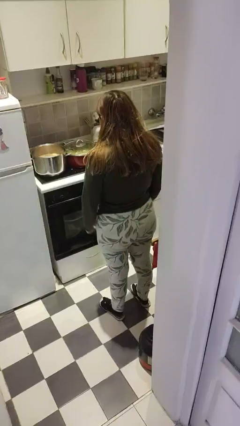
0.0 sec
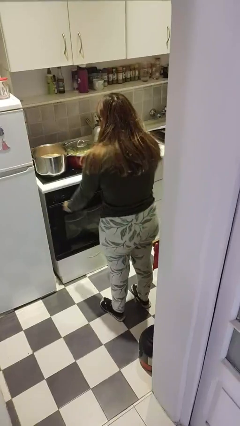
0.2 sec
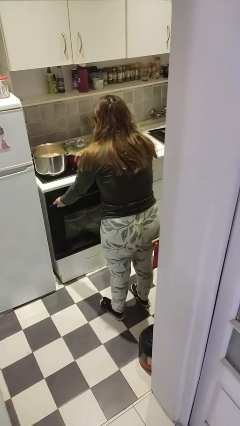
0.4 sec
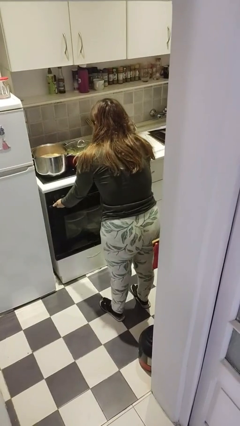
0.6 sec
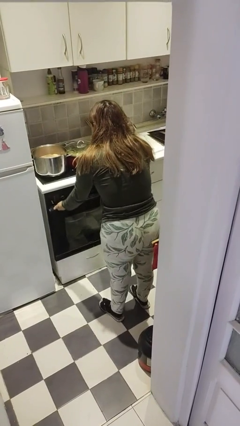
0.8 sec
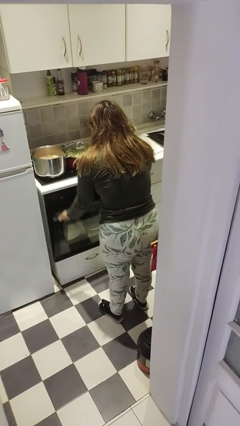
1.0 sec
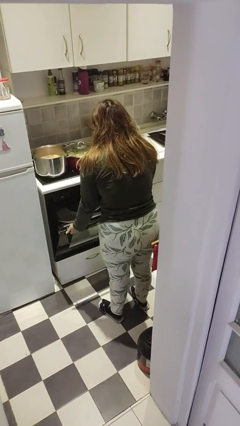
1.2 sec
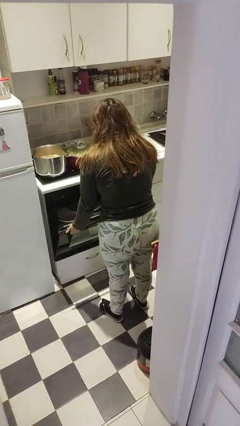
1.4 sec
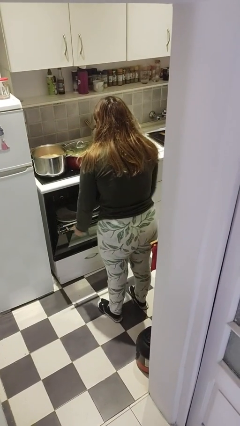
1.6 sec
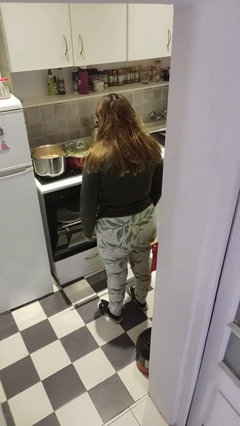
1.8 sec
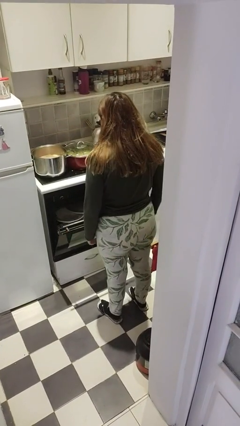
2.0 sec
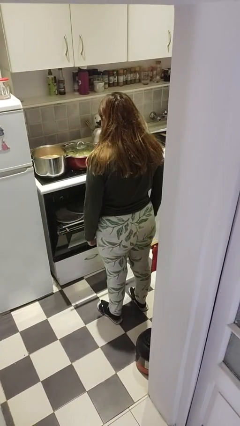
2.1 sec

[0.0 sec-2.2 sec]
person opens dishwasher

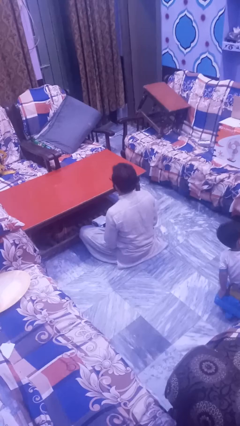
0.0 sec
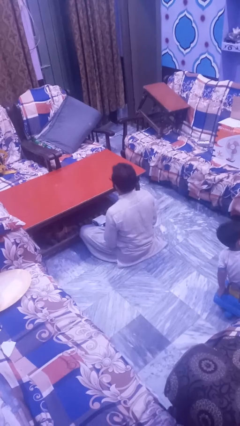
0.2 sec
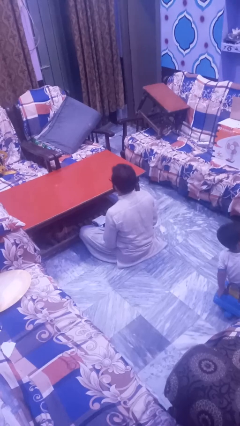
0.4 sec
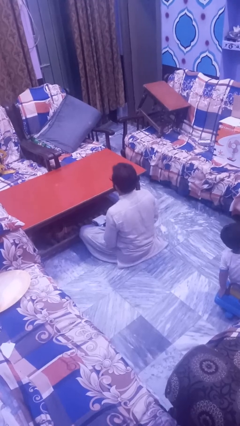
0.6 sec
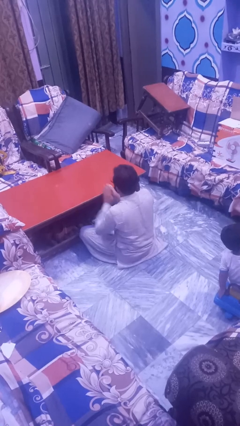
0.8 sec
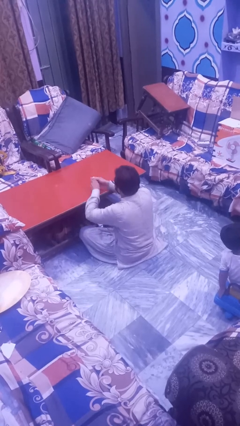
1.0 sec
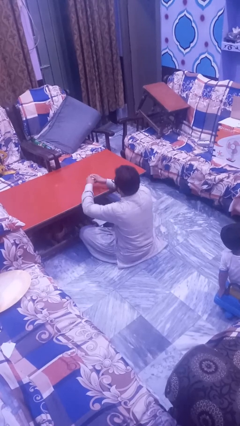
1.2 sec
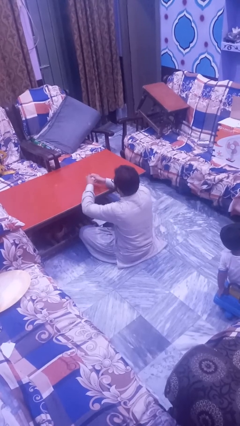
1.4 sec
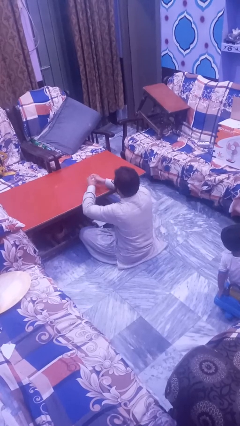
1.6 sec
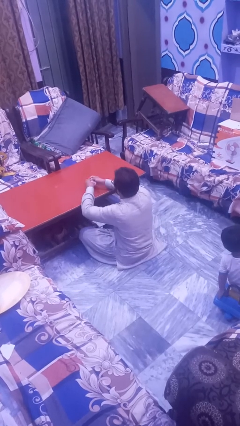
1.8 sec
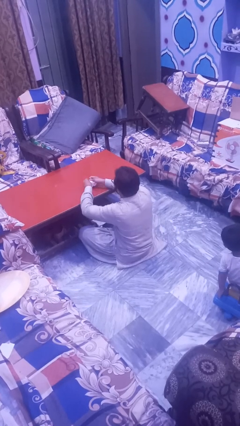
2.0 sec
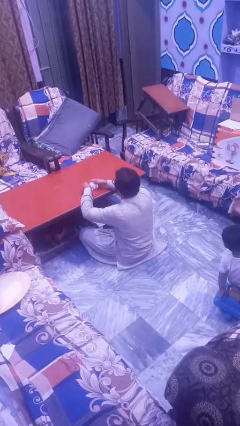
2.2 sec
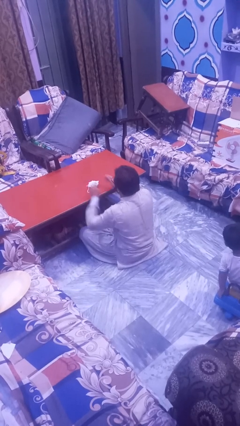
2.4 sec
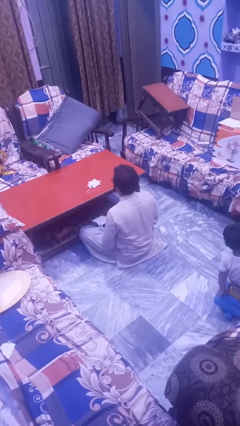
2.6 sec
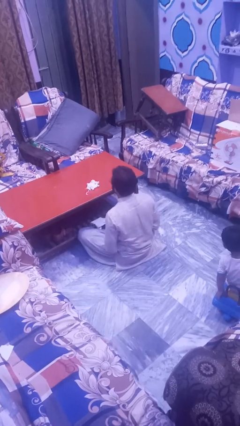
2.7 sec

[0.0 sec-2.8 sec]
person crumples paper

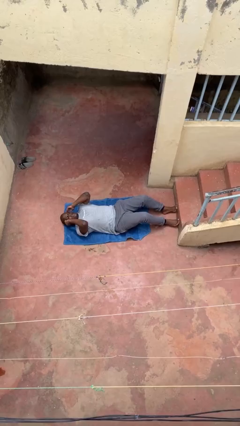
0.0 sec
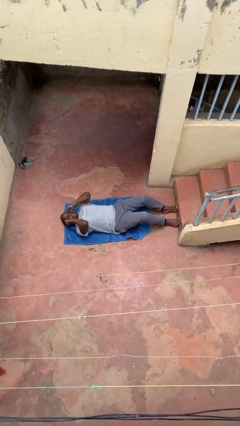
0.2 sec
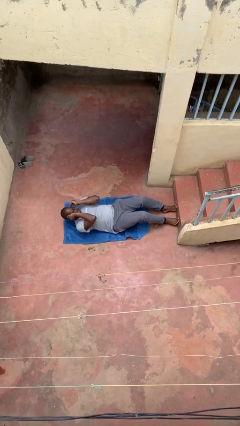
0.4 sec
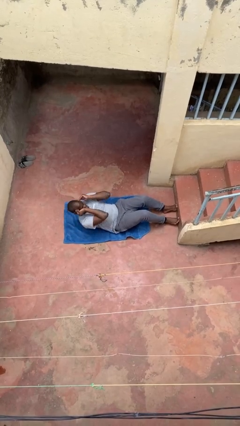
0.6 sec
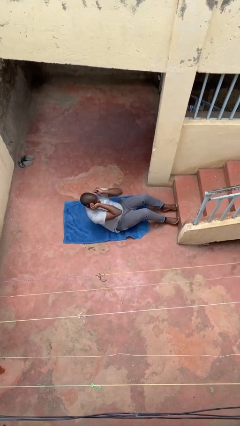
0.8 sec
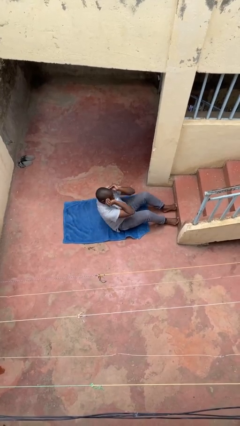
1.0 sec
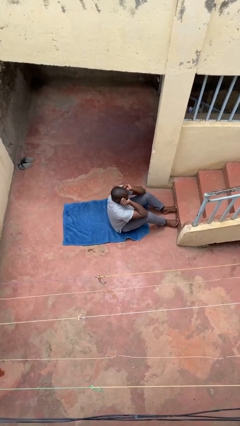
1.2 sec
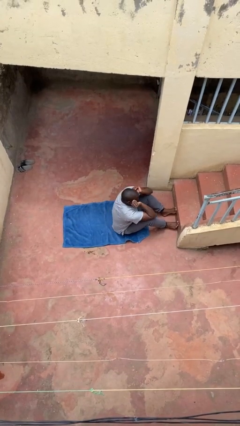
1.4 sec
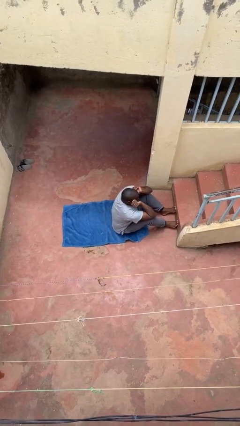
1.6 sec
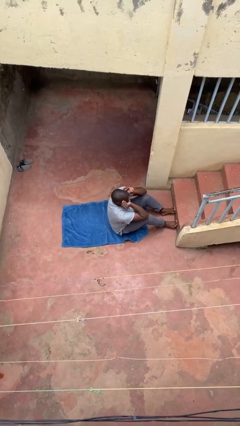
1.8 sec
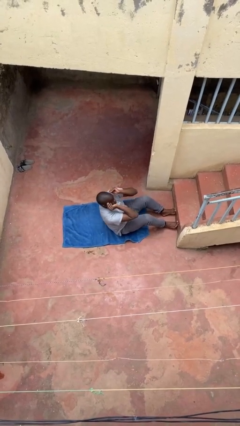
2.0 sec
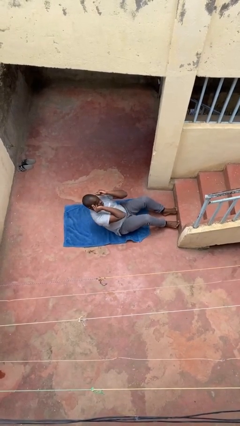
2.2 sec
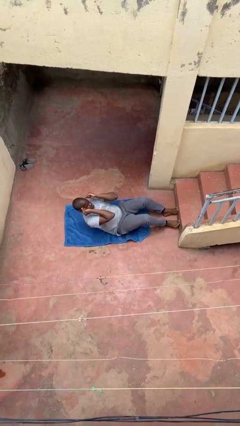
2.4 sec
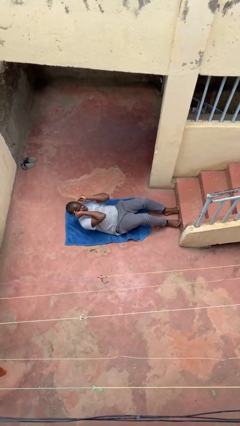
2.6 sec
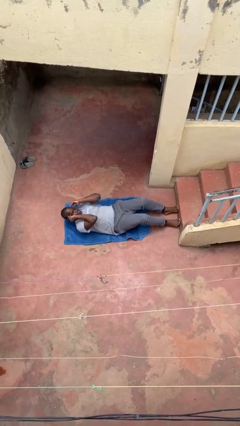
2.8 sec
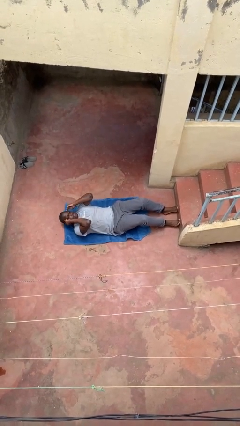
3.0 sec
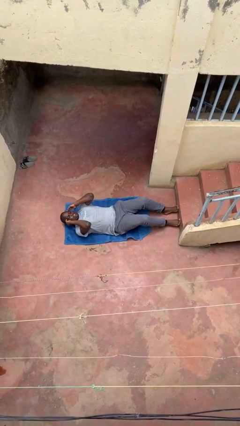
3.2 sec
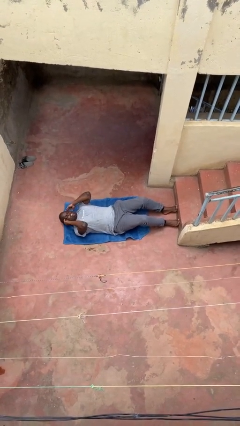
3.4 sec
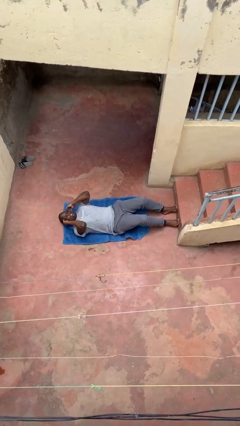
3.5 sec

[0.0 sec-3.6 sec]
person exercises with situp

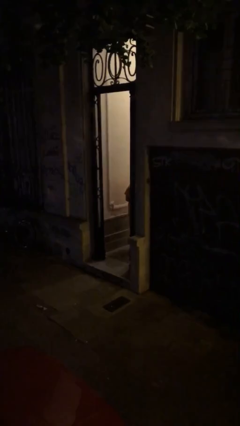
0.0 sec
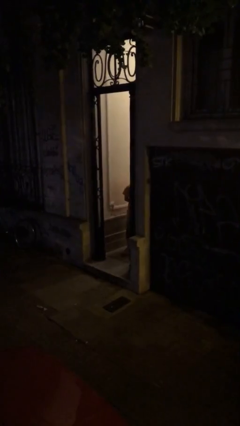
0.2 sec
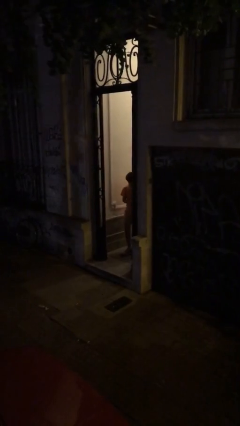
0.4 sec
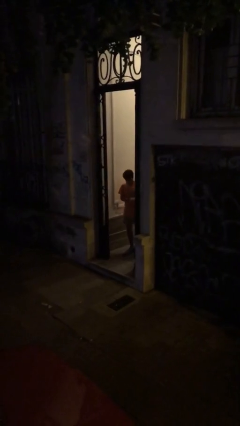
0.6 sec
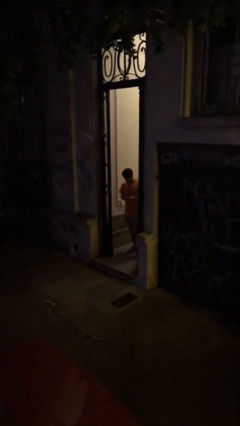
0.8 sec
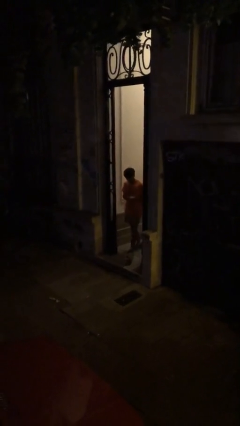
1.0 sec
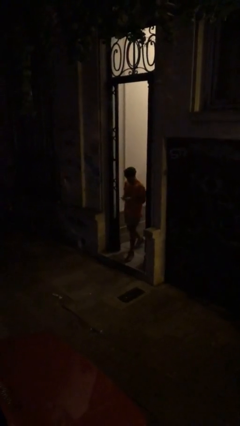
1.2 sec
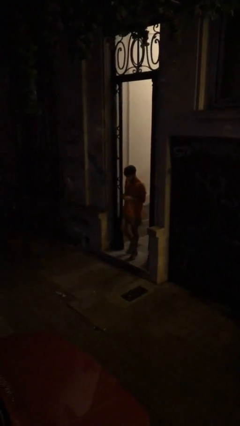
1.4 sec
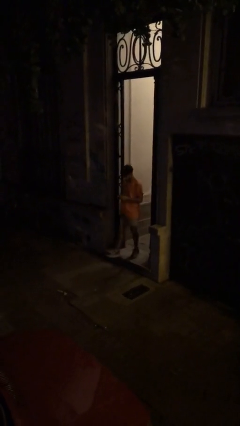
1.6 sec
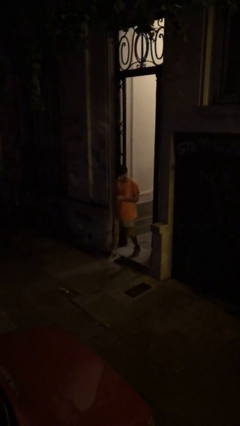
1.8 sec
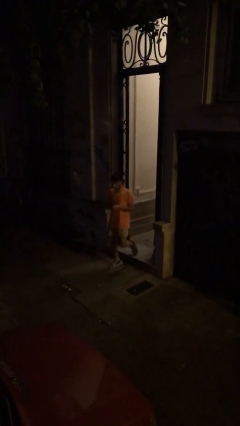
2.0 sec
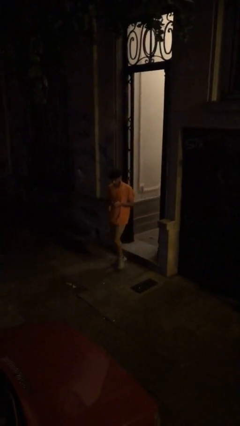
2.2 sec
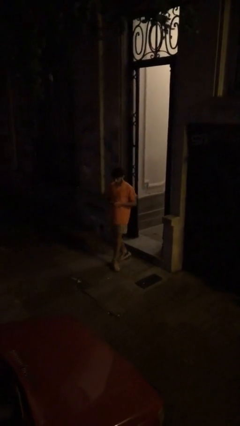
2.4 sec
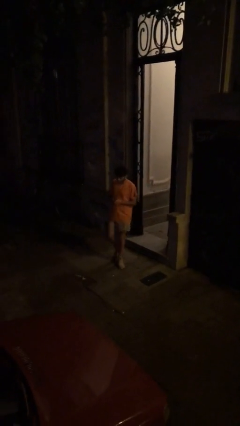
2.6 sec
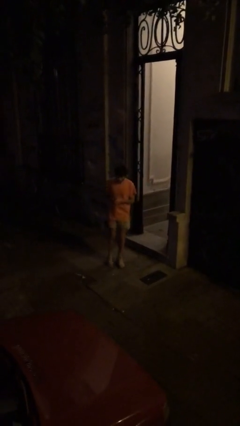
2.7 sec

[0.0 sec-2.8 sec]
person enters scene through structure

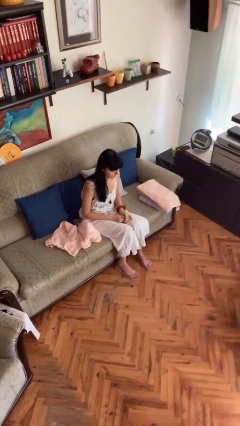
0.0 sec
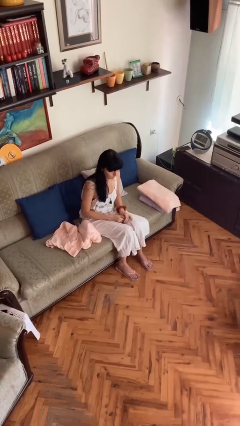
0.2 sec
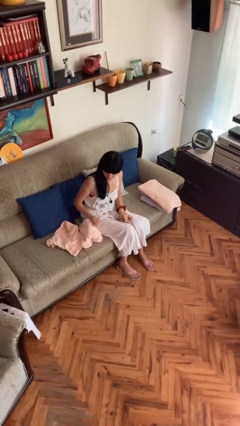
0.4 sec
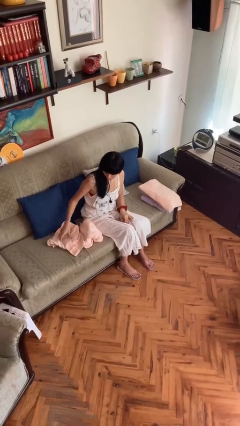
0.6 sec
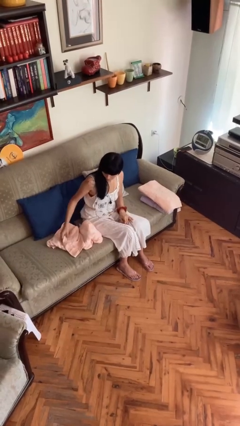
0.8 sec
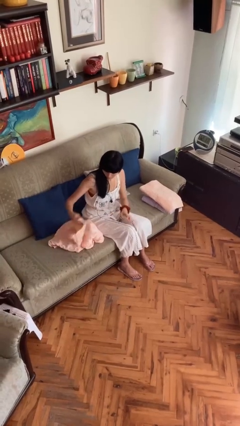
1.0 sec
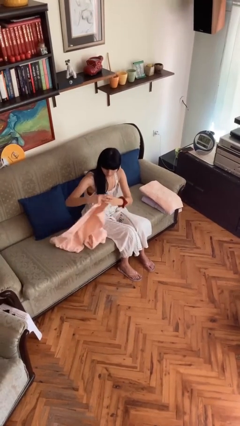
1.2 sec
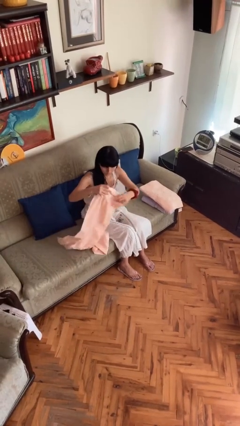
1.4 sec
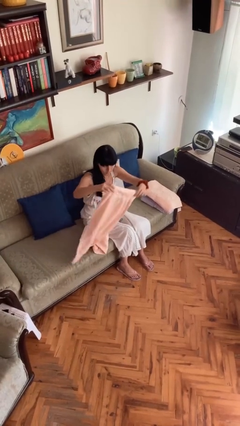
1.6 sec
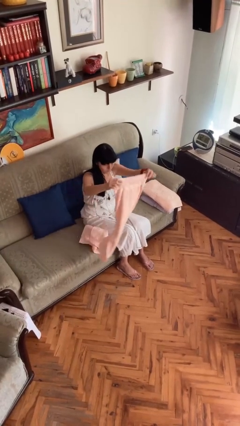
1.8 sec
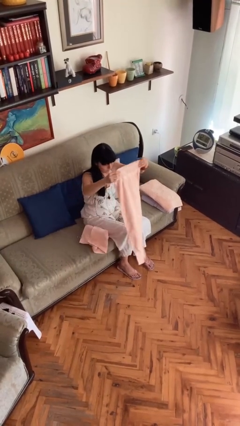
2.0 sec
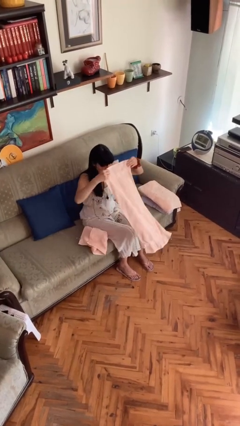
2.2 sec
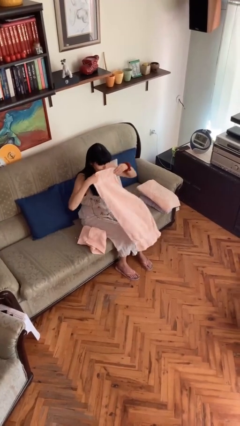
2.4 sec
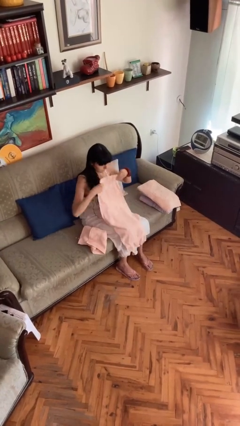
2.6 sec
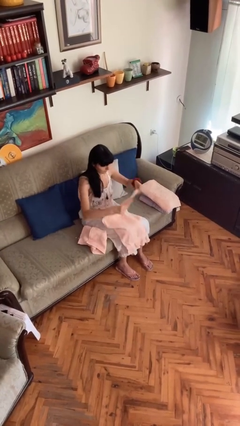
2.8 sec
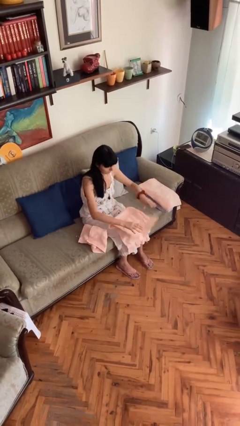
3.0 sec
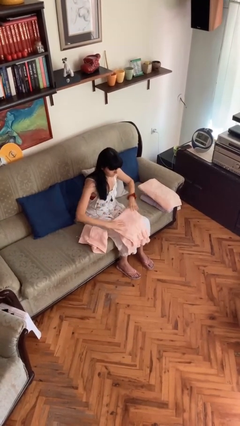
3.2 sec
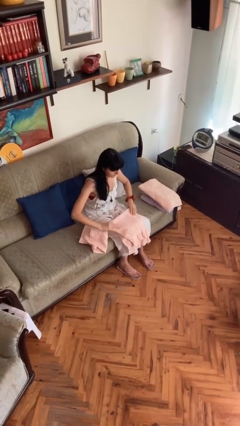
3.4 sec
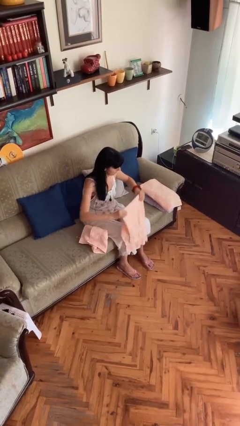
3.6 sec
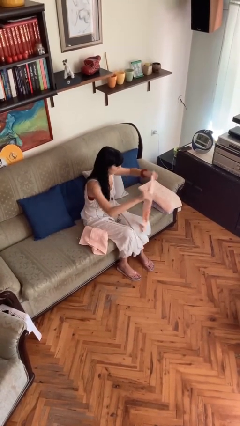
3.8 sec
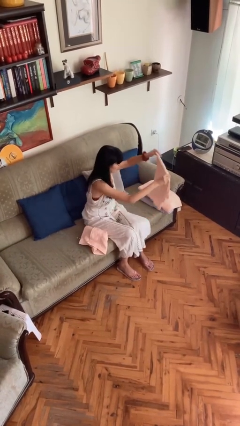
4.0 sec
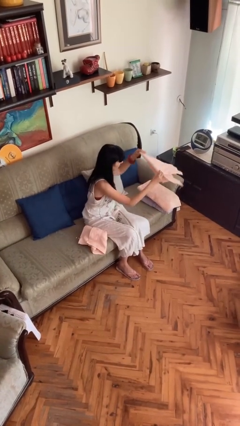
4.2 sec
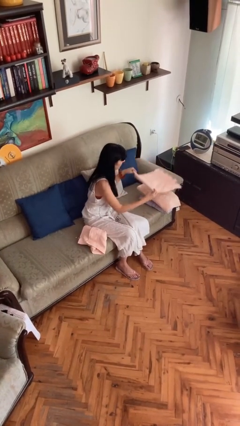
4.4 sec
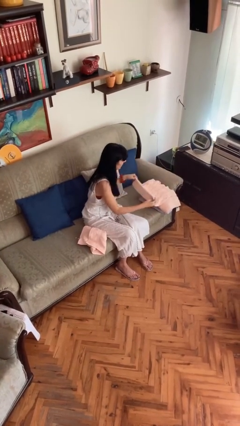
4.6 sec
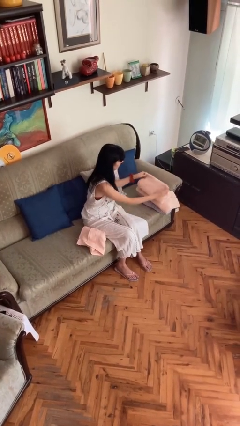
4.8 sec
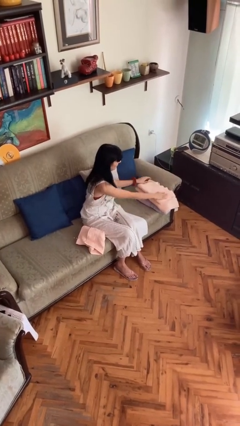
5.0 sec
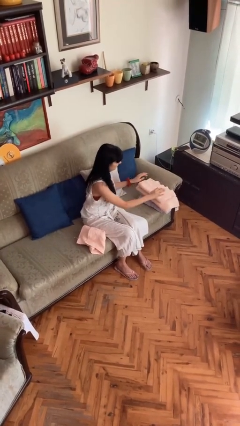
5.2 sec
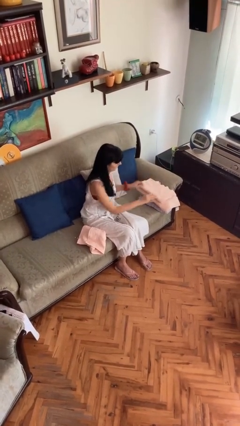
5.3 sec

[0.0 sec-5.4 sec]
person folds towel

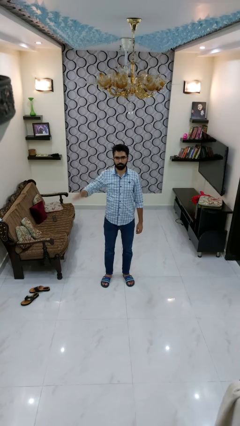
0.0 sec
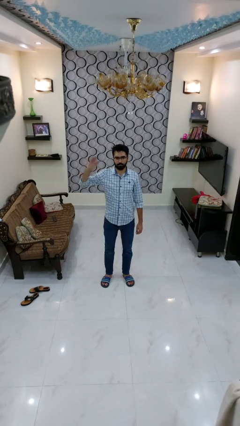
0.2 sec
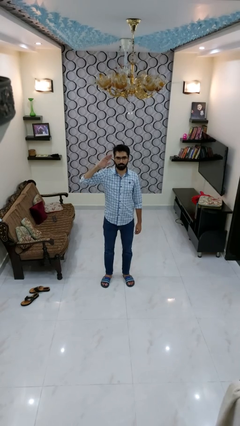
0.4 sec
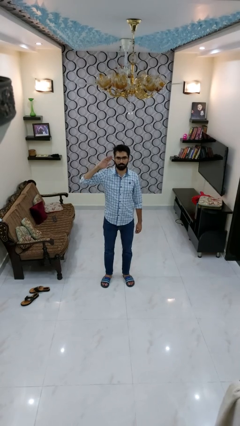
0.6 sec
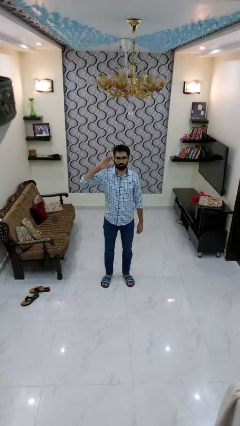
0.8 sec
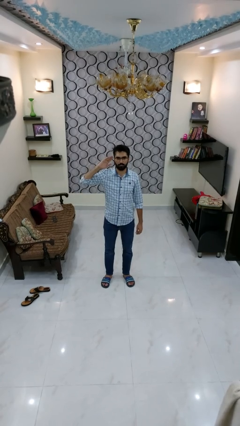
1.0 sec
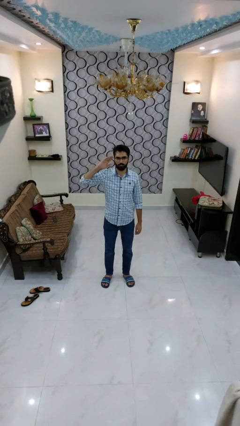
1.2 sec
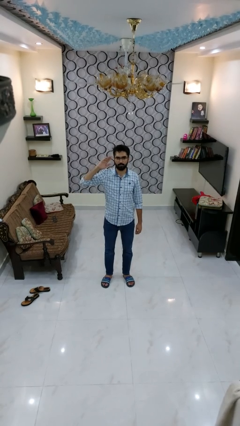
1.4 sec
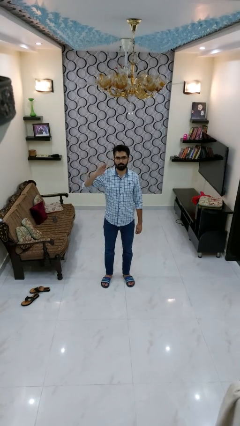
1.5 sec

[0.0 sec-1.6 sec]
person salutes
